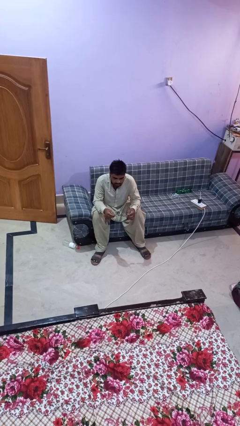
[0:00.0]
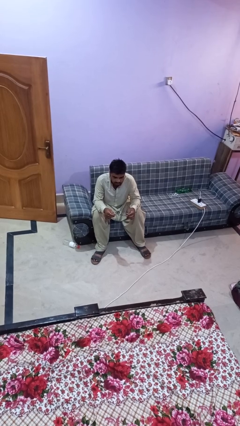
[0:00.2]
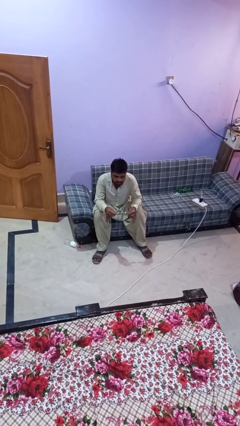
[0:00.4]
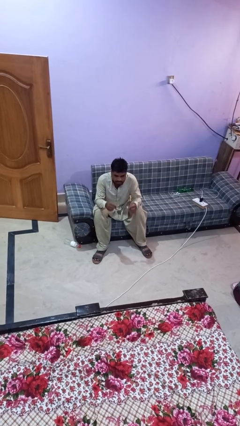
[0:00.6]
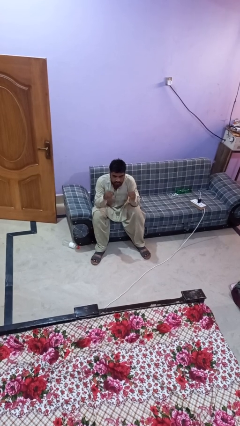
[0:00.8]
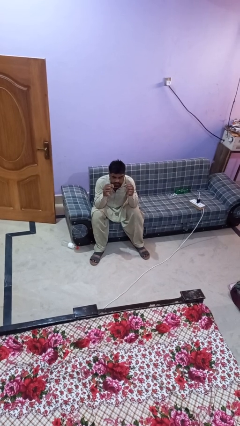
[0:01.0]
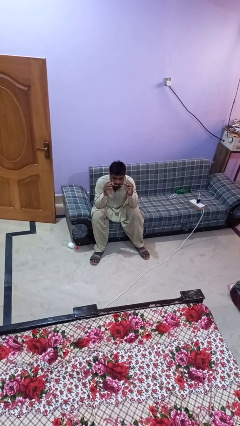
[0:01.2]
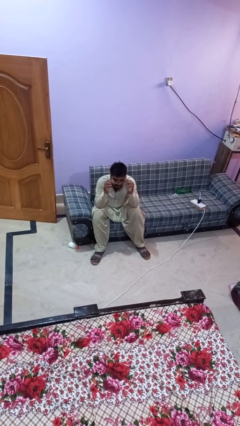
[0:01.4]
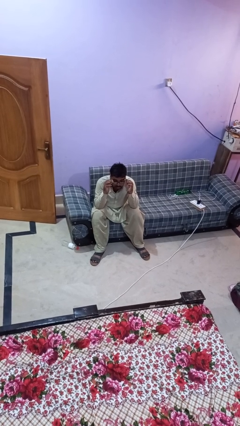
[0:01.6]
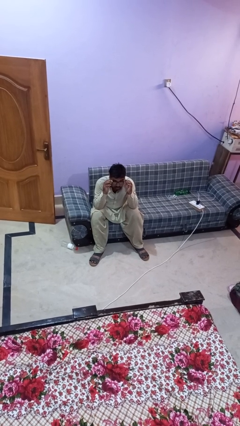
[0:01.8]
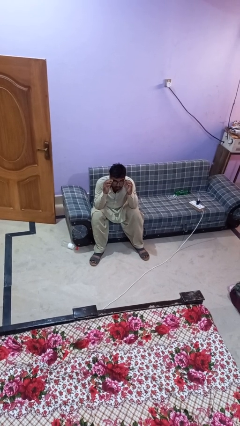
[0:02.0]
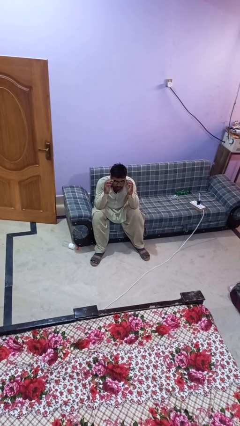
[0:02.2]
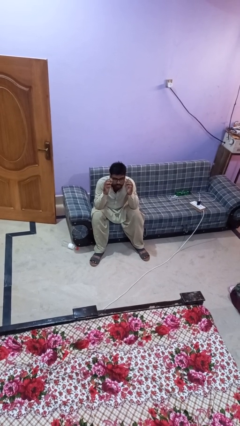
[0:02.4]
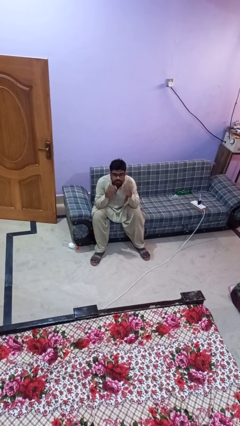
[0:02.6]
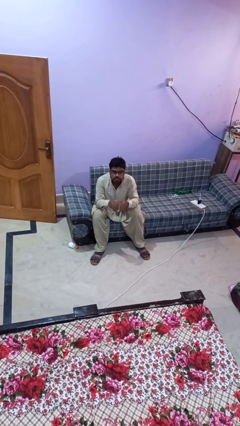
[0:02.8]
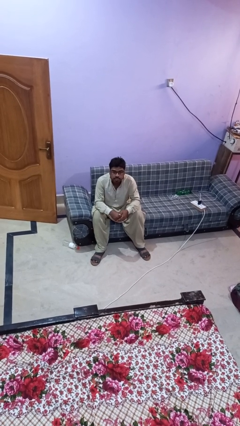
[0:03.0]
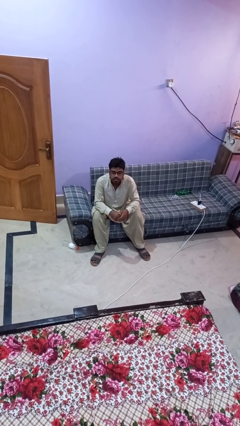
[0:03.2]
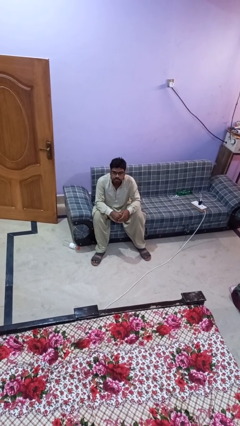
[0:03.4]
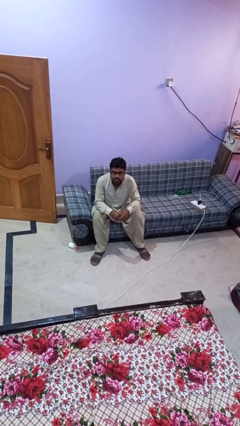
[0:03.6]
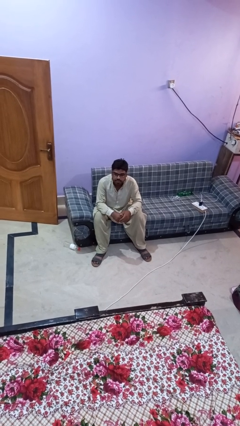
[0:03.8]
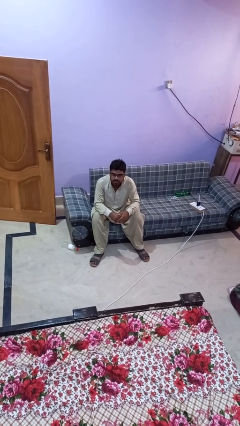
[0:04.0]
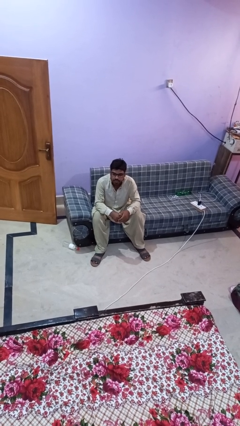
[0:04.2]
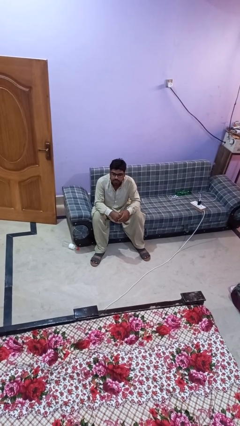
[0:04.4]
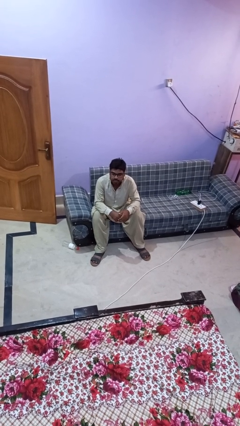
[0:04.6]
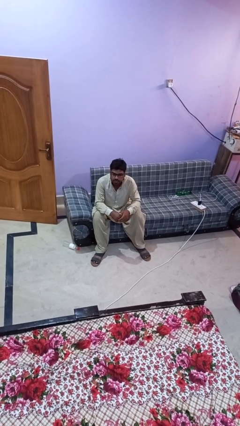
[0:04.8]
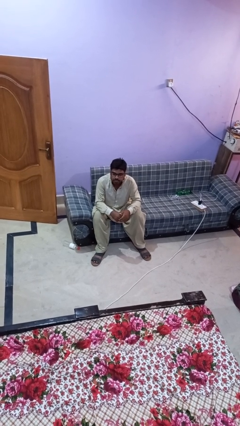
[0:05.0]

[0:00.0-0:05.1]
person puts on glasses

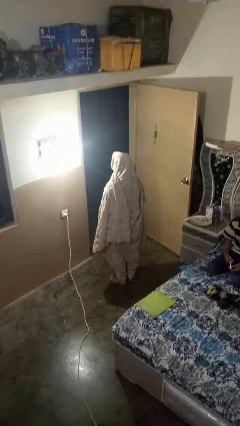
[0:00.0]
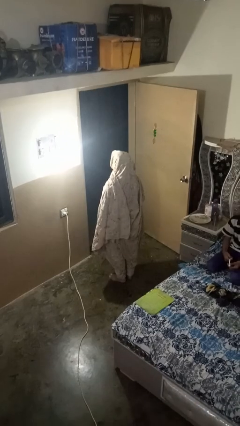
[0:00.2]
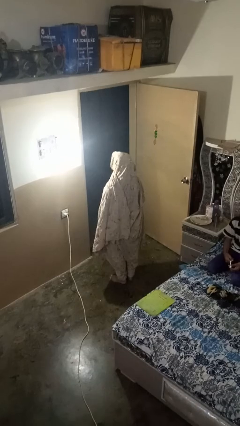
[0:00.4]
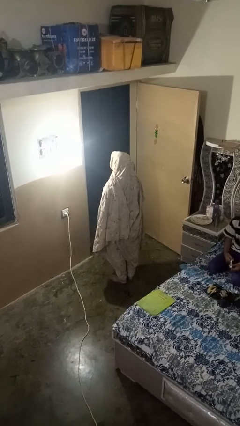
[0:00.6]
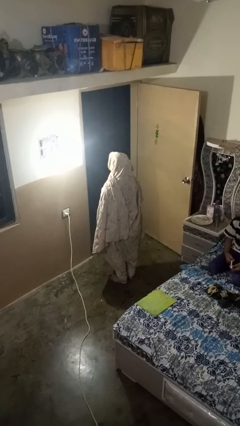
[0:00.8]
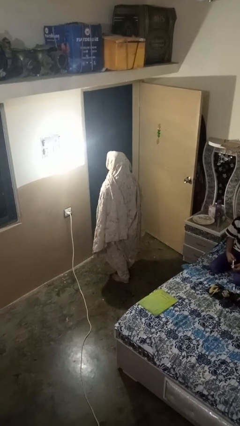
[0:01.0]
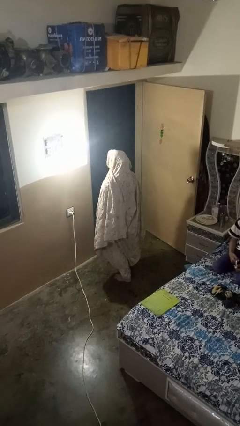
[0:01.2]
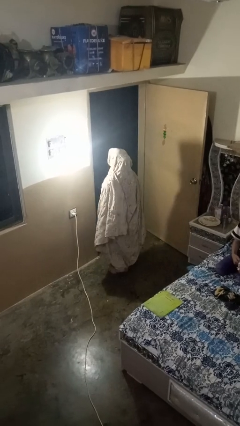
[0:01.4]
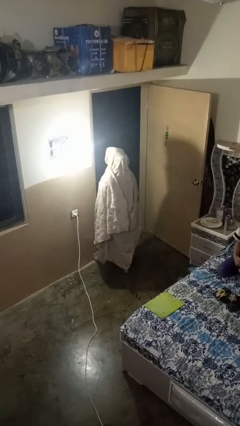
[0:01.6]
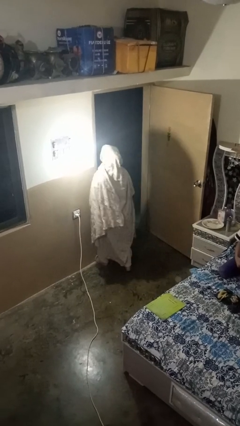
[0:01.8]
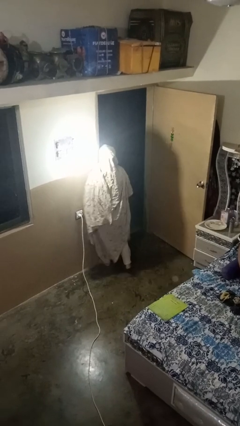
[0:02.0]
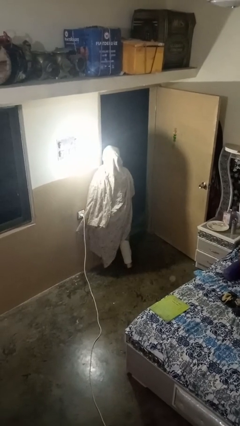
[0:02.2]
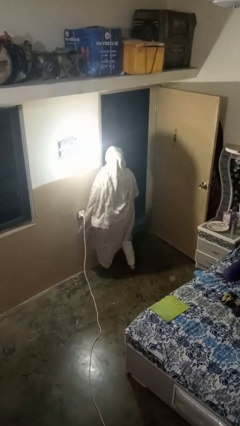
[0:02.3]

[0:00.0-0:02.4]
person bumps into wall

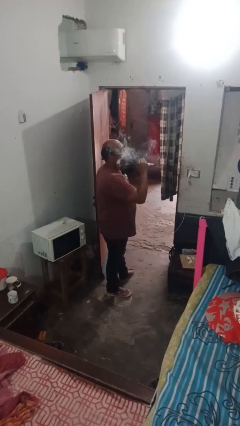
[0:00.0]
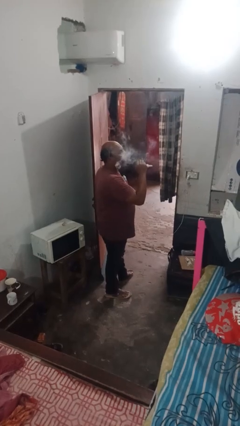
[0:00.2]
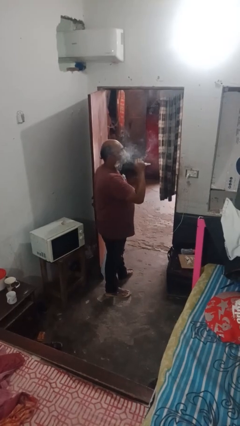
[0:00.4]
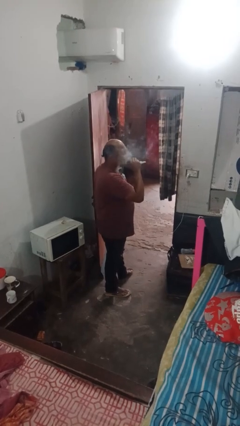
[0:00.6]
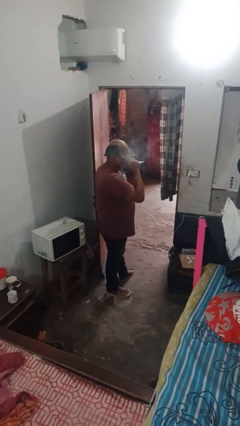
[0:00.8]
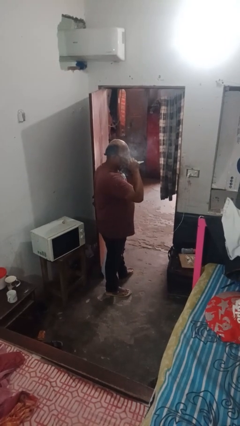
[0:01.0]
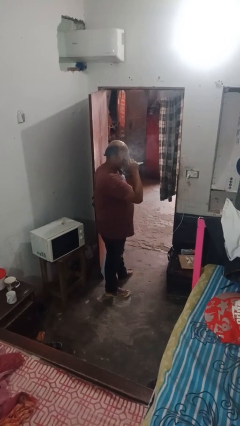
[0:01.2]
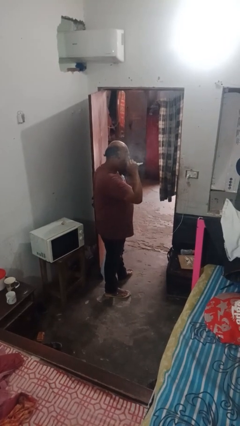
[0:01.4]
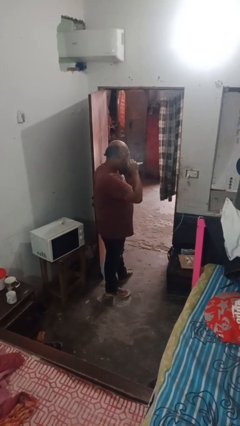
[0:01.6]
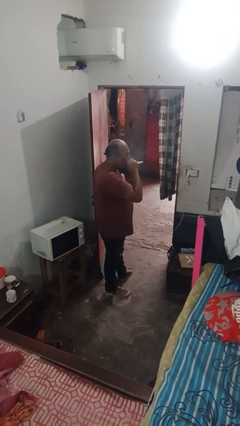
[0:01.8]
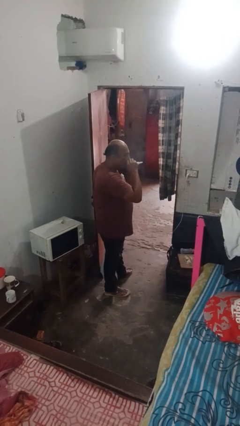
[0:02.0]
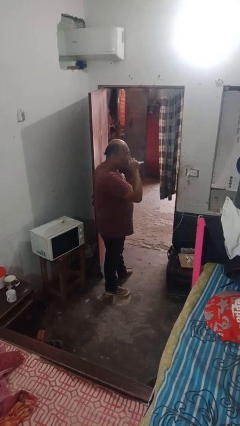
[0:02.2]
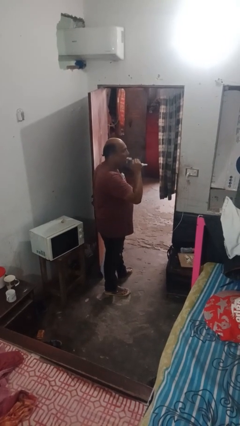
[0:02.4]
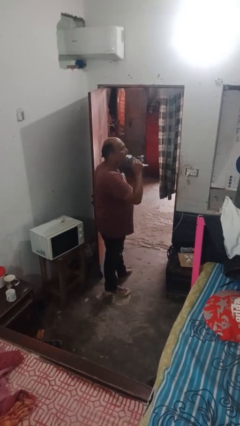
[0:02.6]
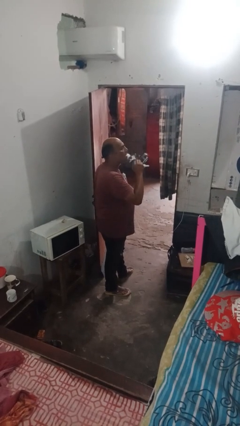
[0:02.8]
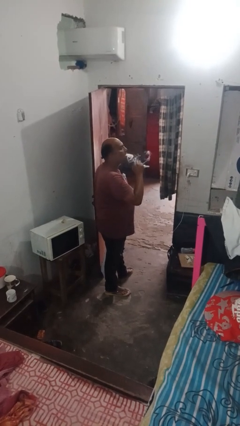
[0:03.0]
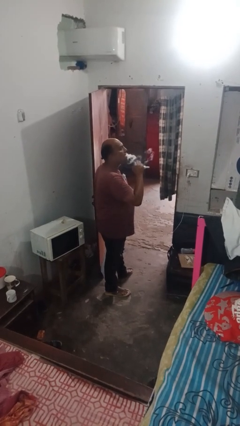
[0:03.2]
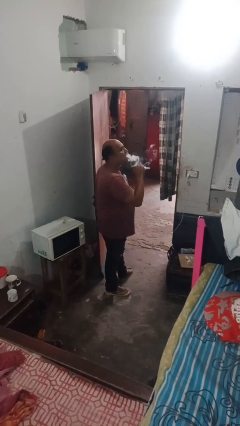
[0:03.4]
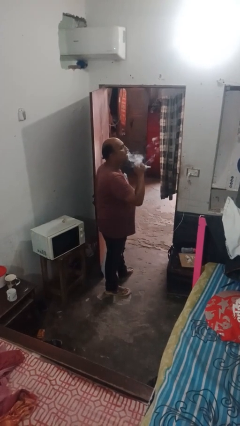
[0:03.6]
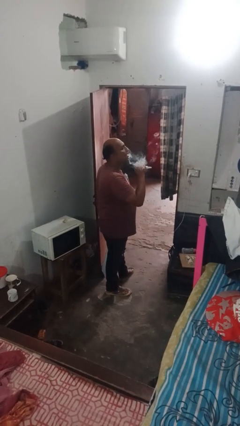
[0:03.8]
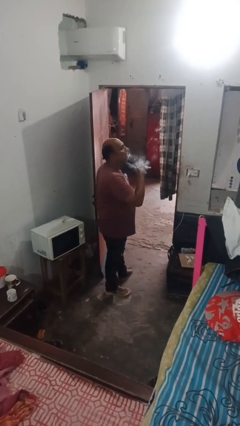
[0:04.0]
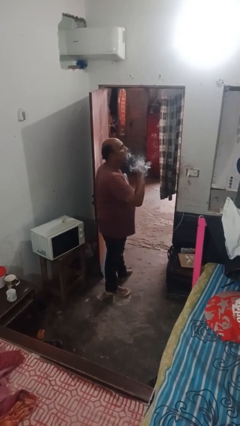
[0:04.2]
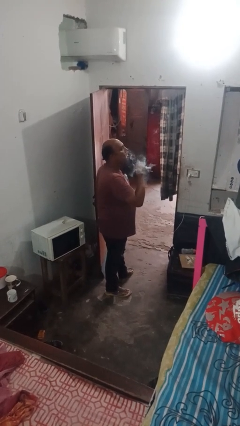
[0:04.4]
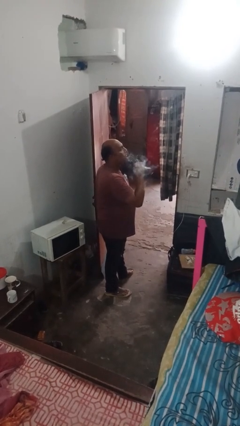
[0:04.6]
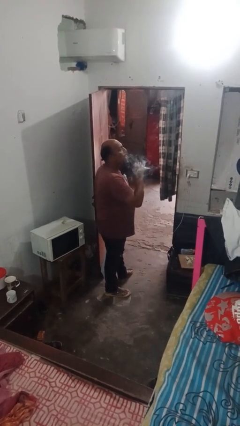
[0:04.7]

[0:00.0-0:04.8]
person vapes

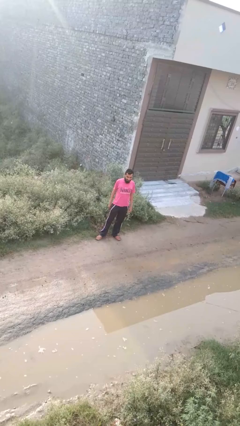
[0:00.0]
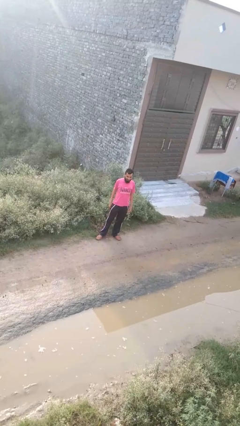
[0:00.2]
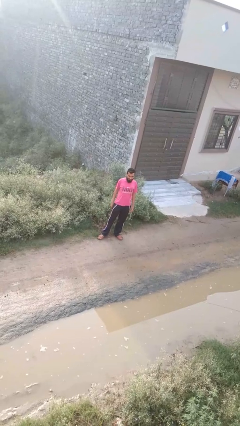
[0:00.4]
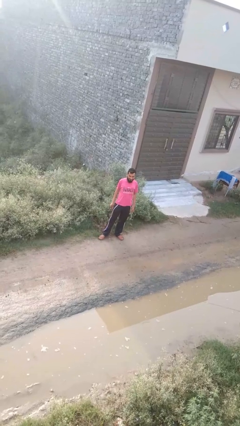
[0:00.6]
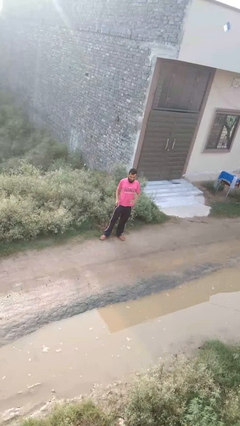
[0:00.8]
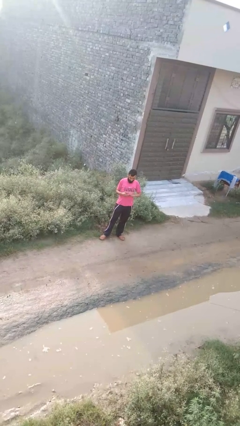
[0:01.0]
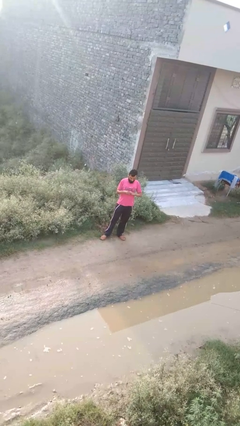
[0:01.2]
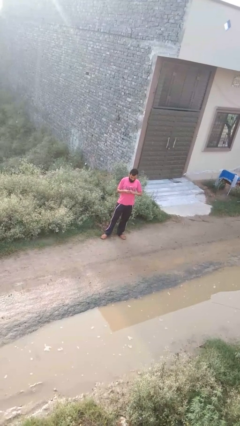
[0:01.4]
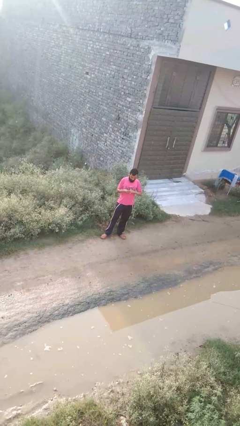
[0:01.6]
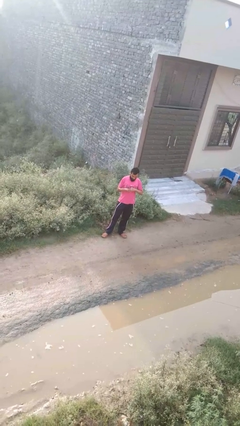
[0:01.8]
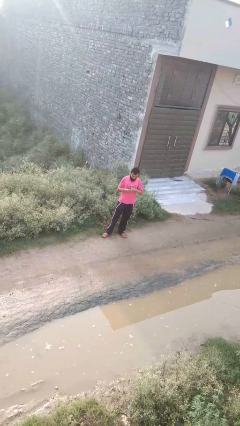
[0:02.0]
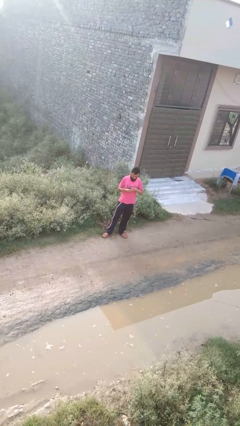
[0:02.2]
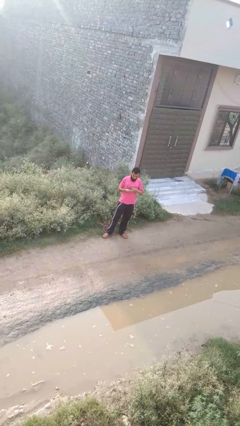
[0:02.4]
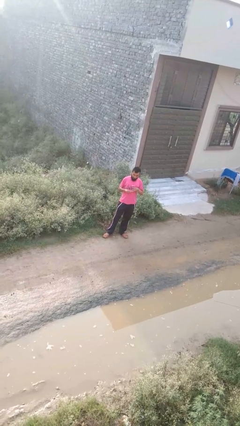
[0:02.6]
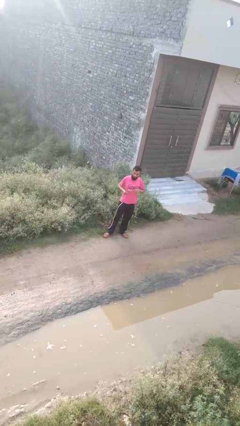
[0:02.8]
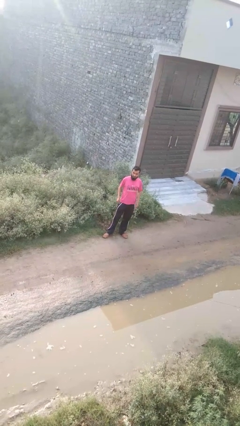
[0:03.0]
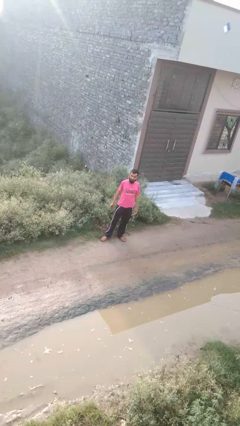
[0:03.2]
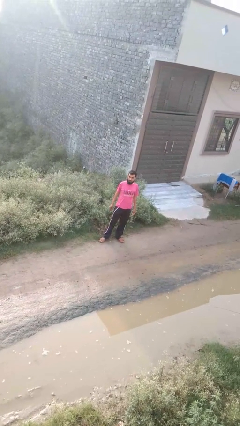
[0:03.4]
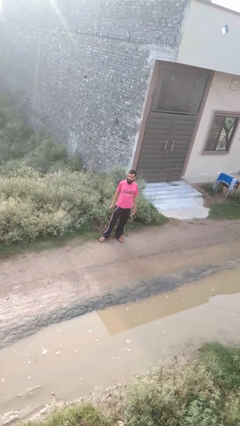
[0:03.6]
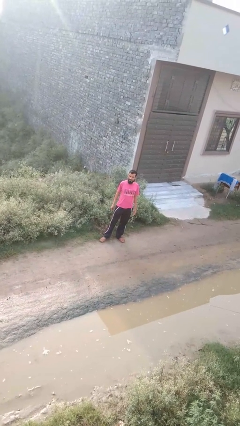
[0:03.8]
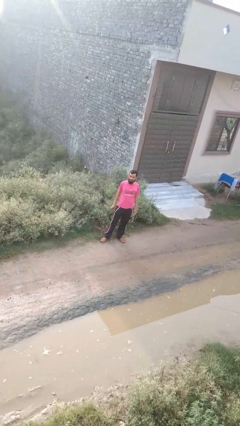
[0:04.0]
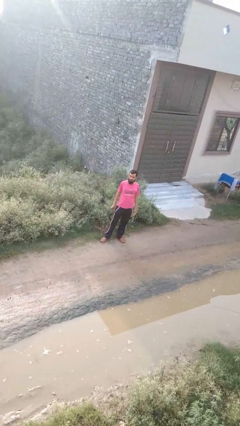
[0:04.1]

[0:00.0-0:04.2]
person takes off ring

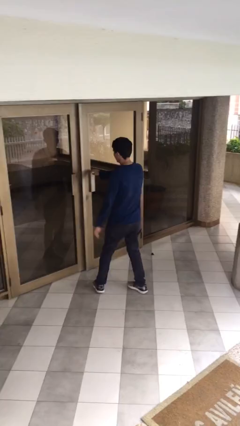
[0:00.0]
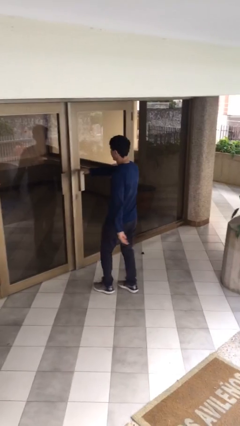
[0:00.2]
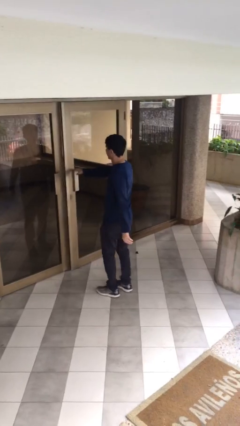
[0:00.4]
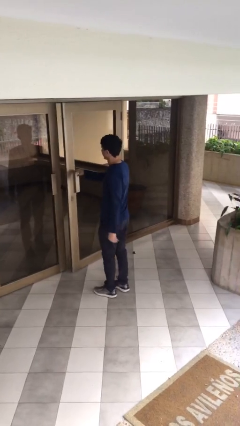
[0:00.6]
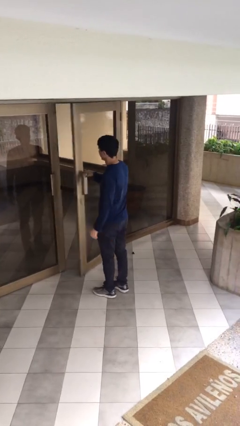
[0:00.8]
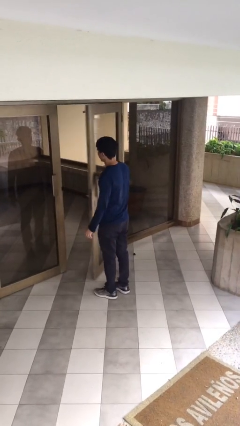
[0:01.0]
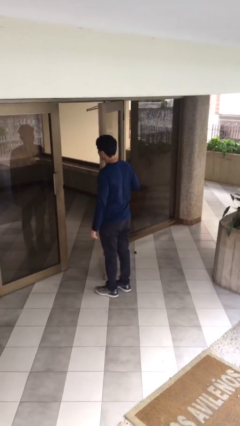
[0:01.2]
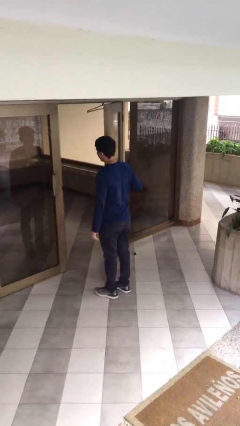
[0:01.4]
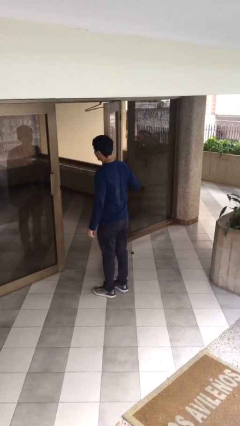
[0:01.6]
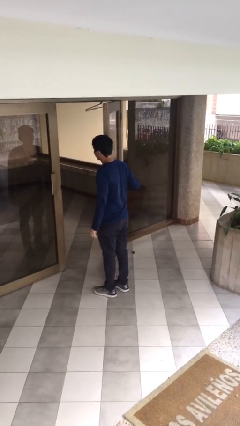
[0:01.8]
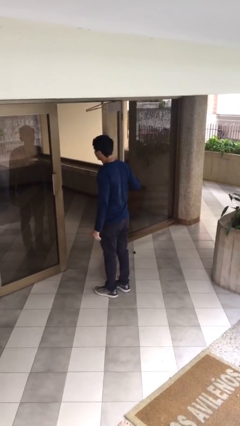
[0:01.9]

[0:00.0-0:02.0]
person opens facility door
